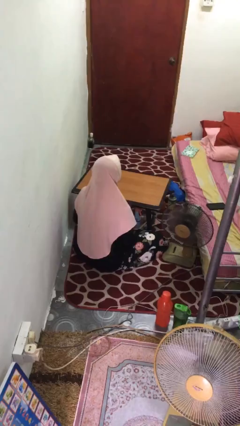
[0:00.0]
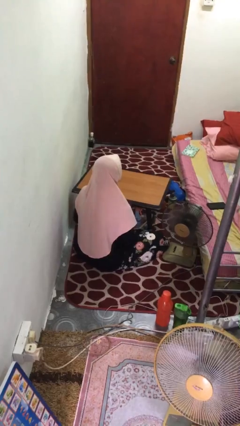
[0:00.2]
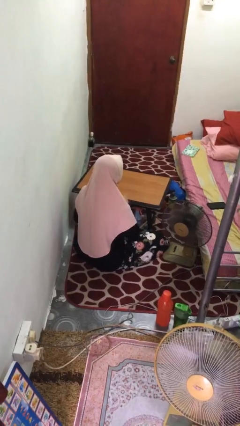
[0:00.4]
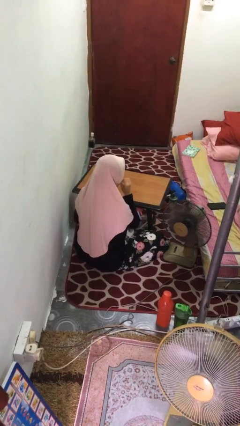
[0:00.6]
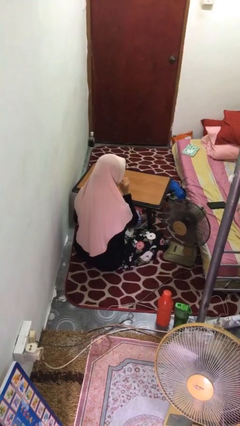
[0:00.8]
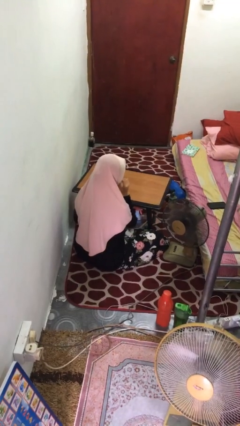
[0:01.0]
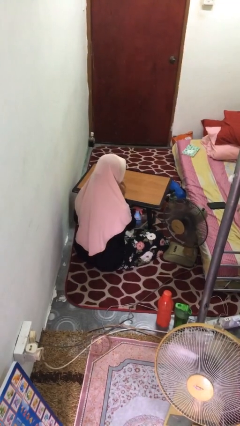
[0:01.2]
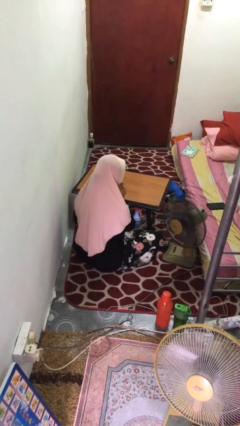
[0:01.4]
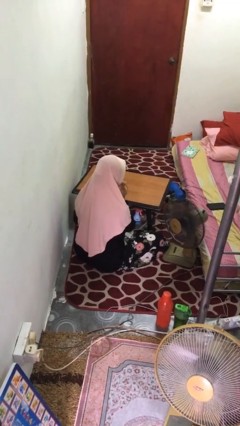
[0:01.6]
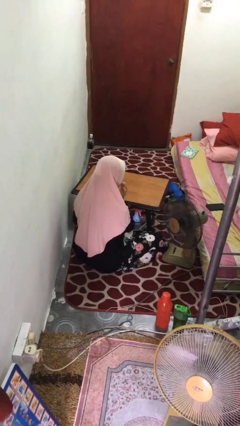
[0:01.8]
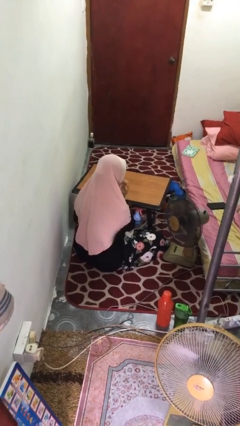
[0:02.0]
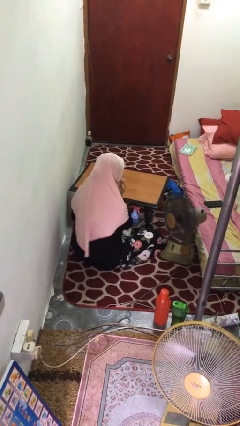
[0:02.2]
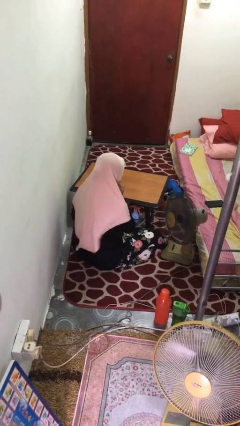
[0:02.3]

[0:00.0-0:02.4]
person licks fingers

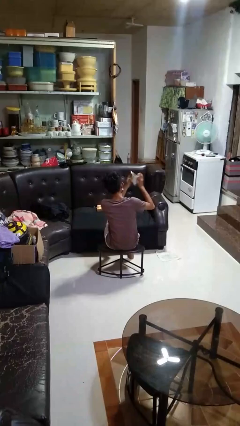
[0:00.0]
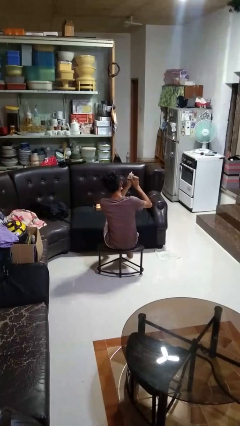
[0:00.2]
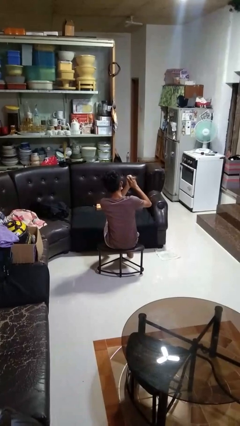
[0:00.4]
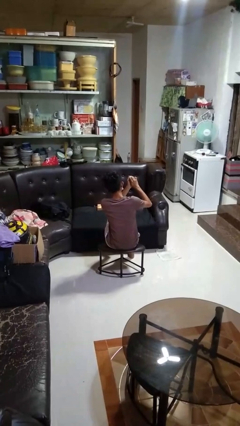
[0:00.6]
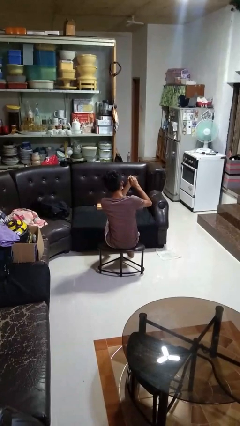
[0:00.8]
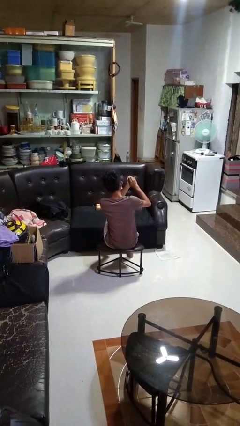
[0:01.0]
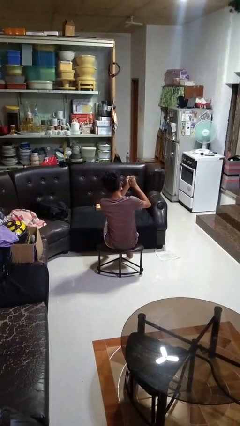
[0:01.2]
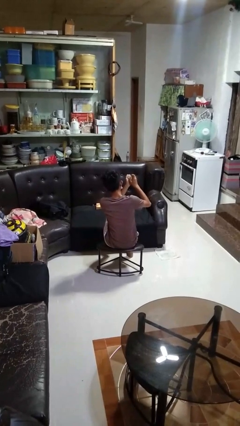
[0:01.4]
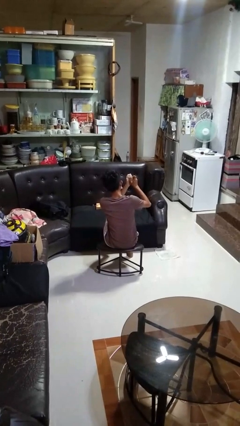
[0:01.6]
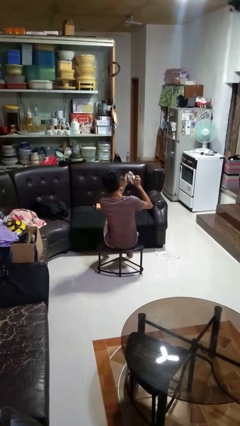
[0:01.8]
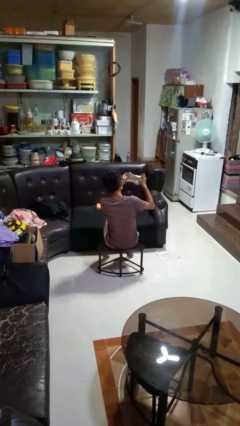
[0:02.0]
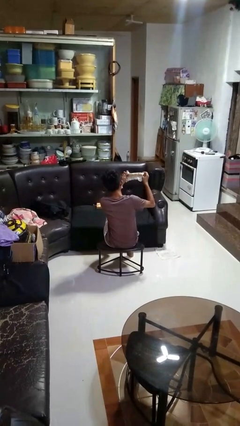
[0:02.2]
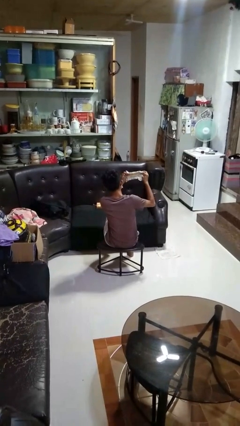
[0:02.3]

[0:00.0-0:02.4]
person crumples paper

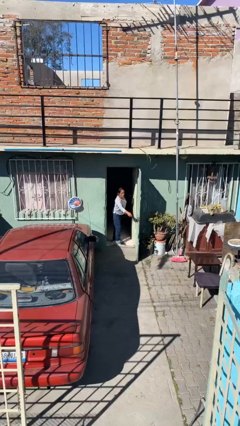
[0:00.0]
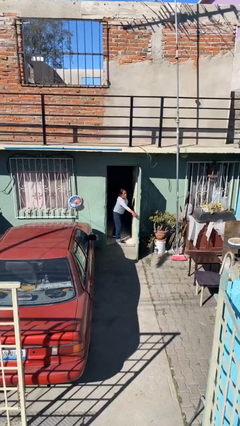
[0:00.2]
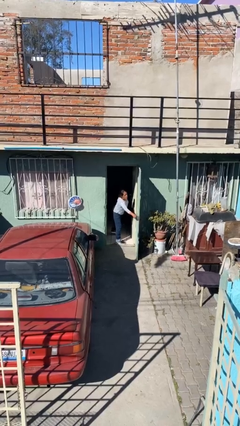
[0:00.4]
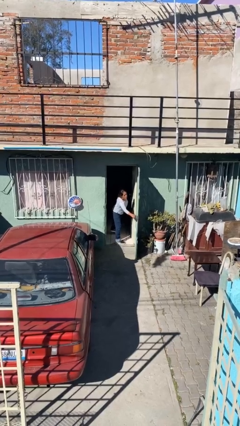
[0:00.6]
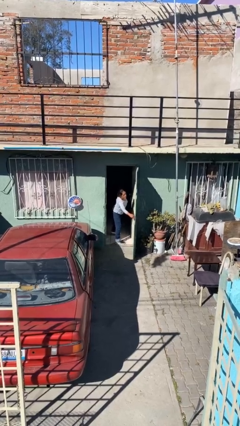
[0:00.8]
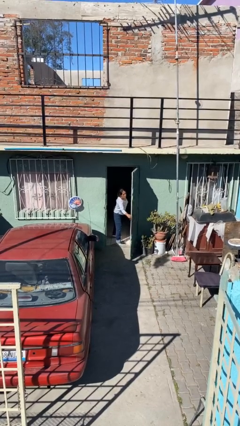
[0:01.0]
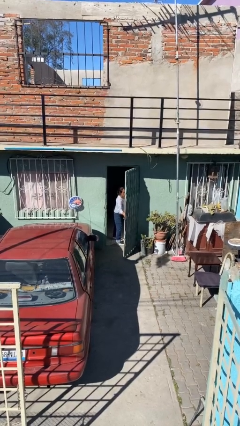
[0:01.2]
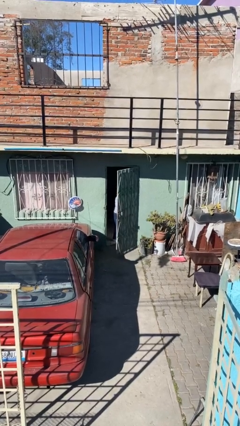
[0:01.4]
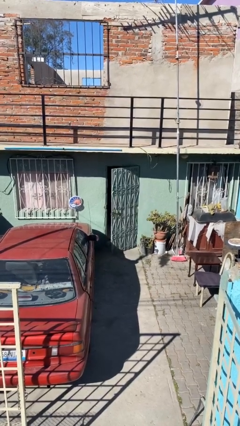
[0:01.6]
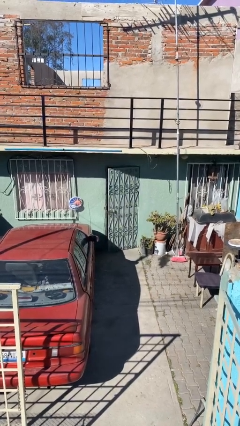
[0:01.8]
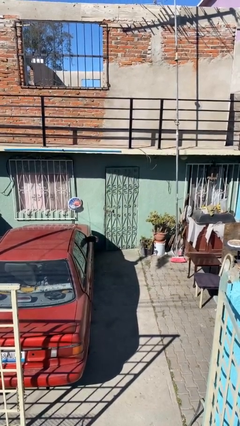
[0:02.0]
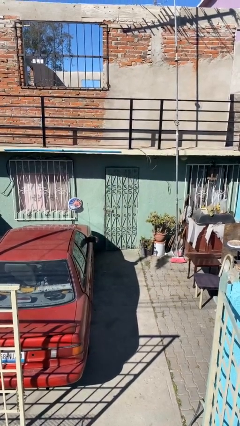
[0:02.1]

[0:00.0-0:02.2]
person closes facility door

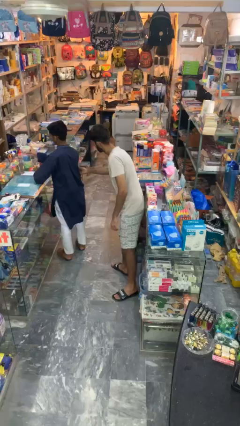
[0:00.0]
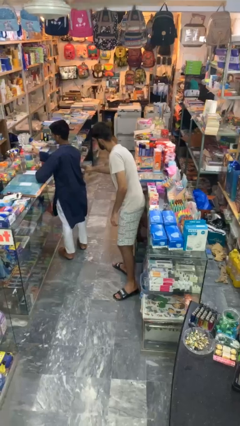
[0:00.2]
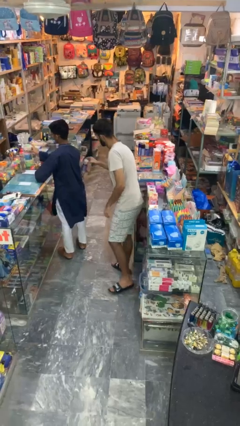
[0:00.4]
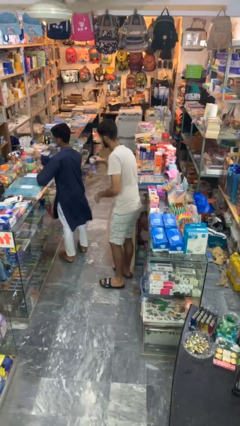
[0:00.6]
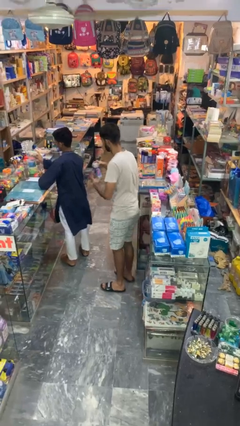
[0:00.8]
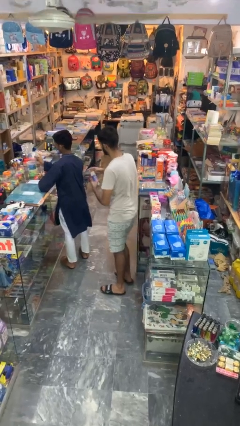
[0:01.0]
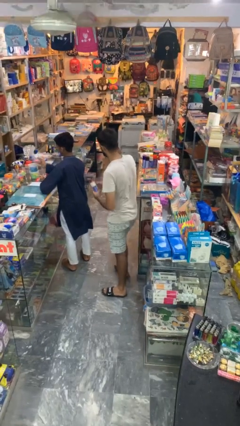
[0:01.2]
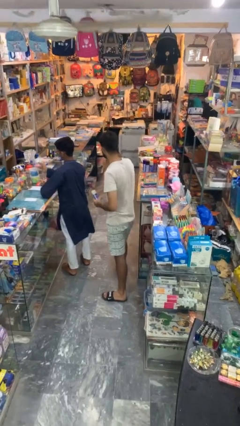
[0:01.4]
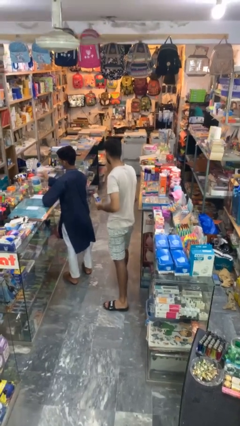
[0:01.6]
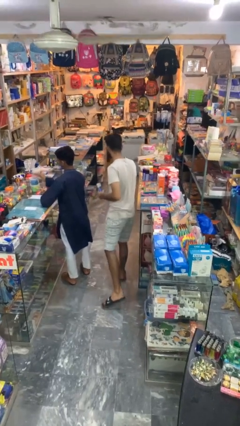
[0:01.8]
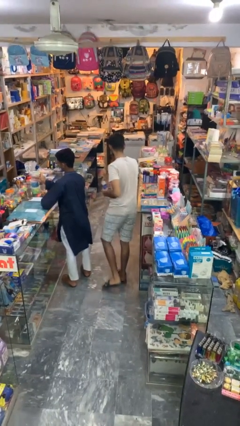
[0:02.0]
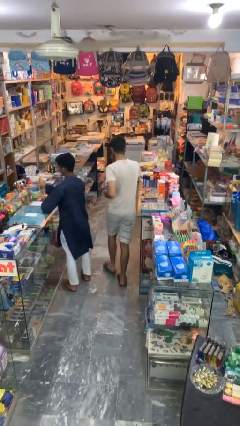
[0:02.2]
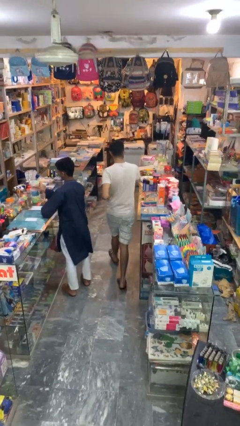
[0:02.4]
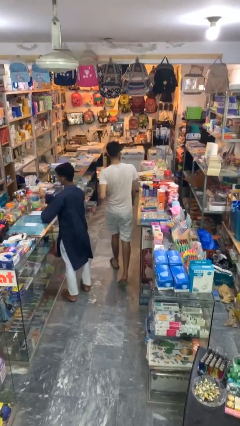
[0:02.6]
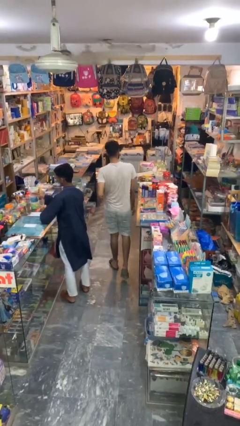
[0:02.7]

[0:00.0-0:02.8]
person steals object from person

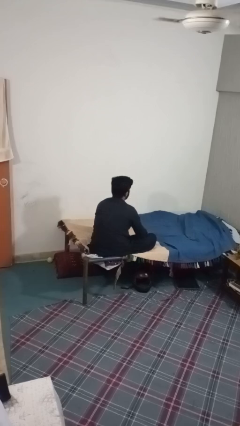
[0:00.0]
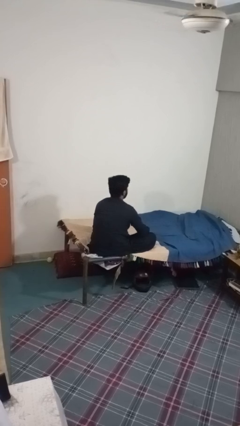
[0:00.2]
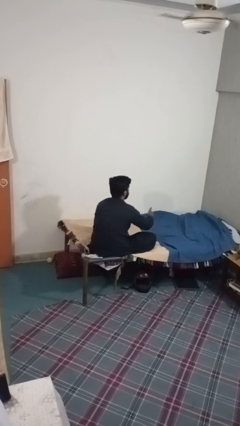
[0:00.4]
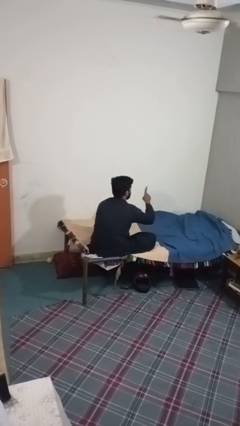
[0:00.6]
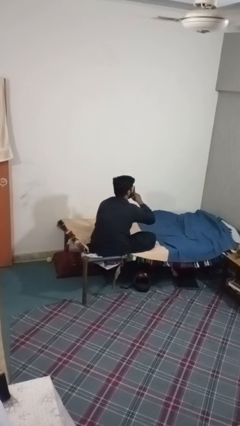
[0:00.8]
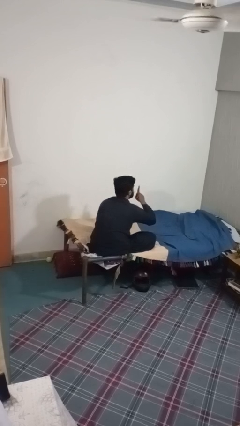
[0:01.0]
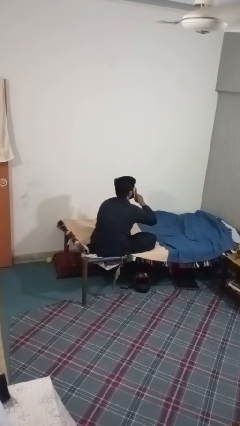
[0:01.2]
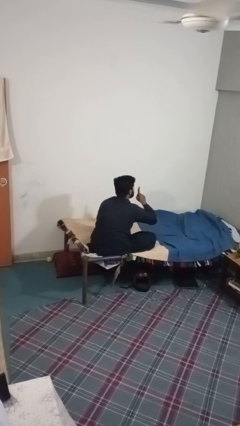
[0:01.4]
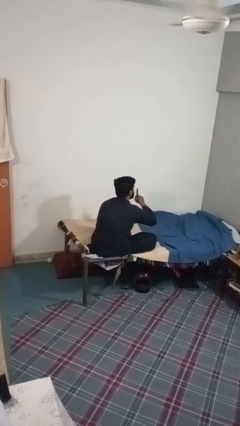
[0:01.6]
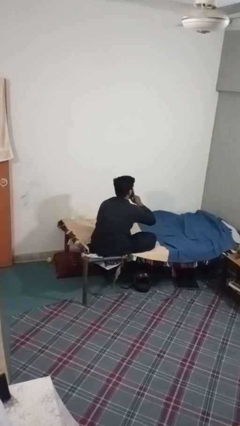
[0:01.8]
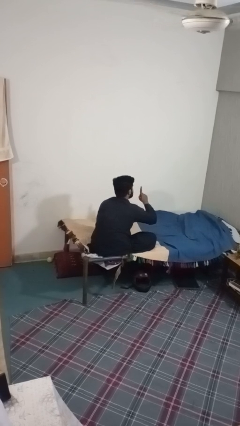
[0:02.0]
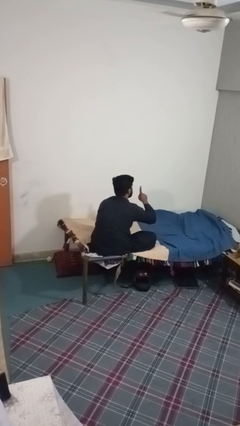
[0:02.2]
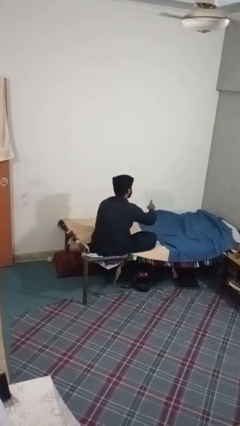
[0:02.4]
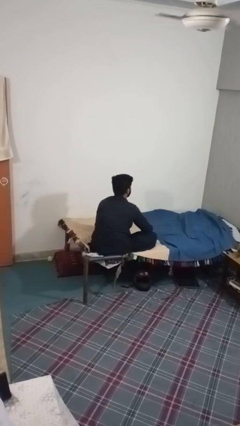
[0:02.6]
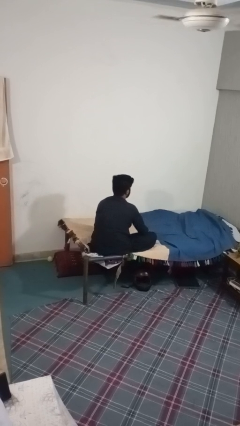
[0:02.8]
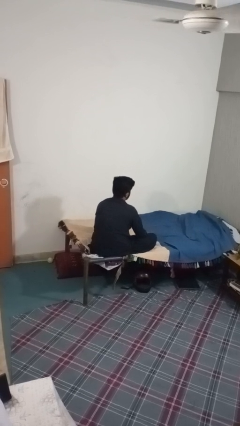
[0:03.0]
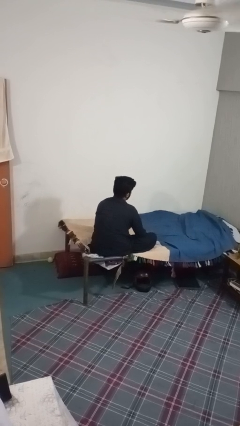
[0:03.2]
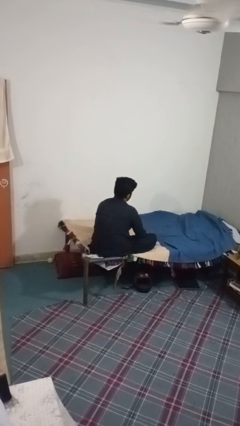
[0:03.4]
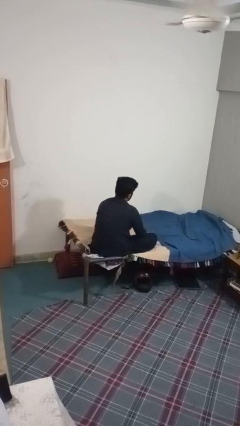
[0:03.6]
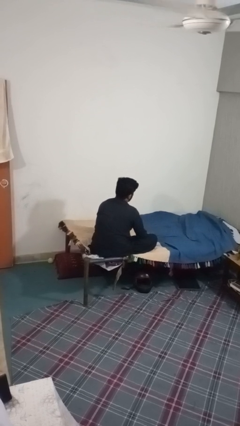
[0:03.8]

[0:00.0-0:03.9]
person gestures be quiet

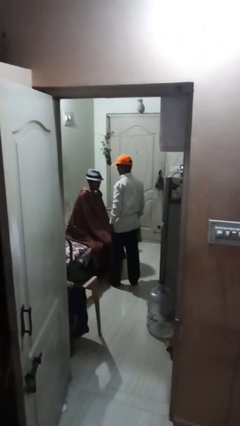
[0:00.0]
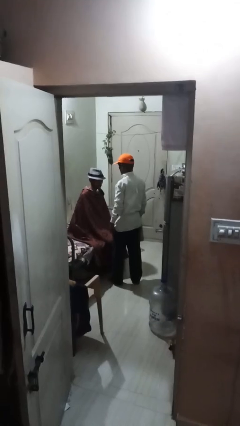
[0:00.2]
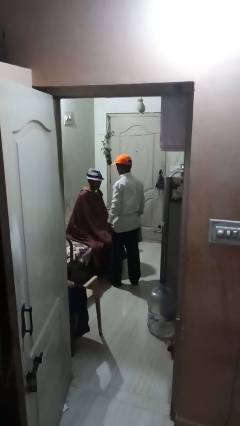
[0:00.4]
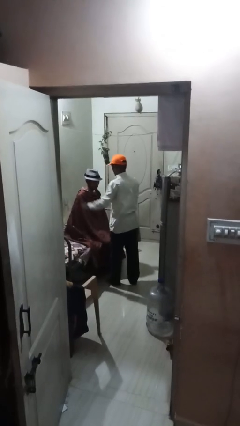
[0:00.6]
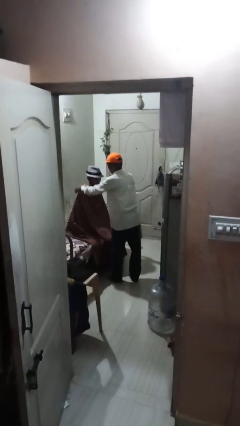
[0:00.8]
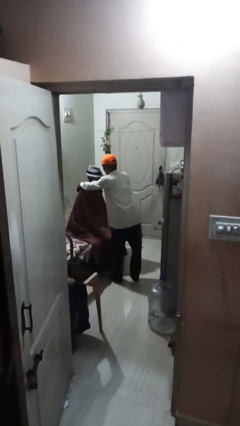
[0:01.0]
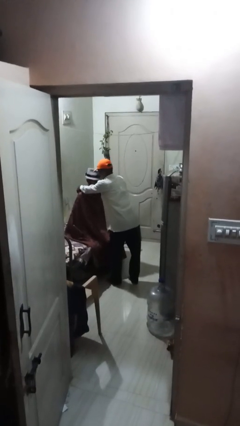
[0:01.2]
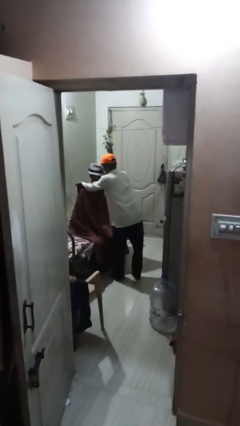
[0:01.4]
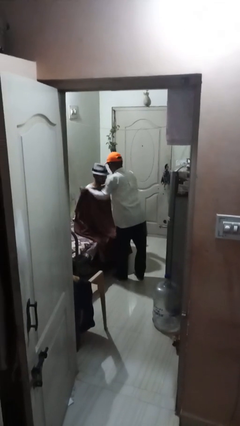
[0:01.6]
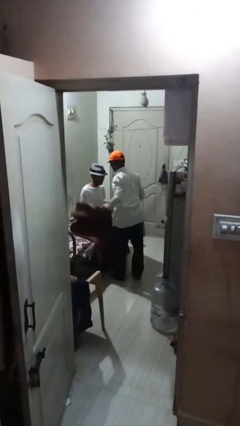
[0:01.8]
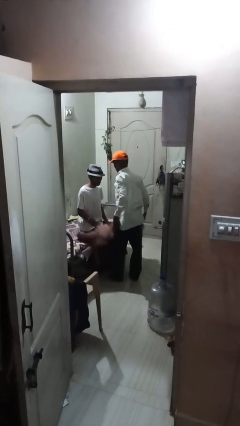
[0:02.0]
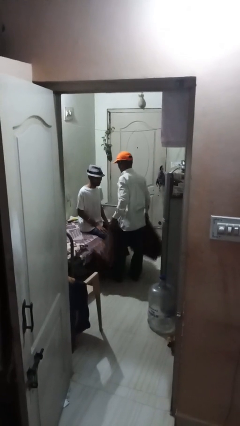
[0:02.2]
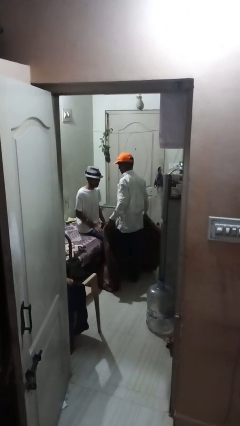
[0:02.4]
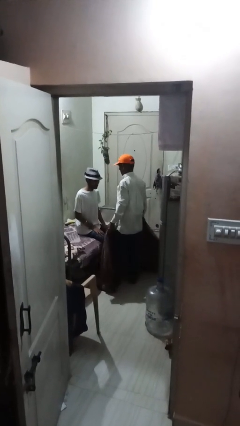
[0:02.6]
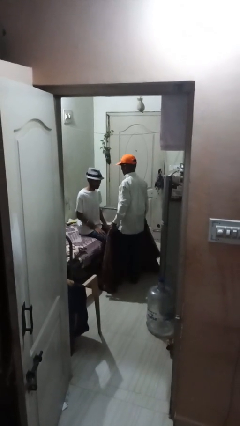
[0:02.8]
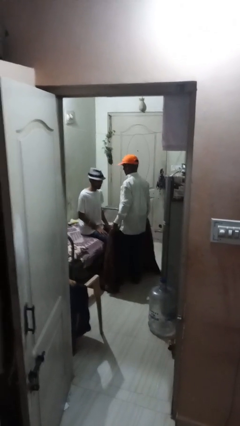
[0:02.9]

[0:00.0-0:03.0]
person covers friend with blanket

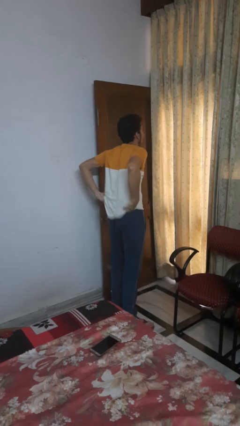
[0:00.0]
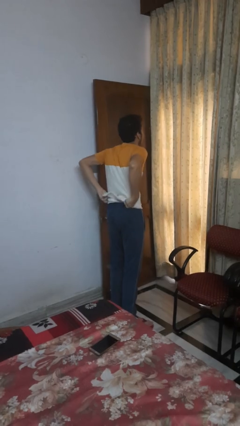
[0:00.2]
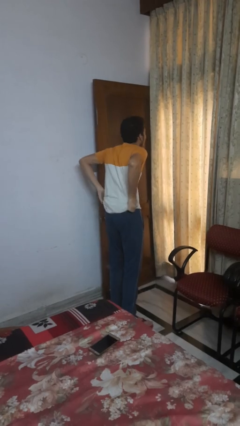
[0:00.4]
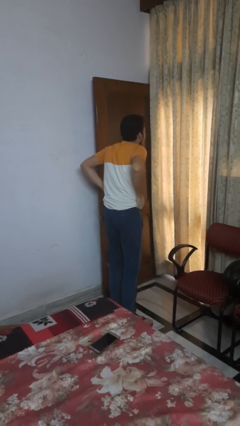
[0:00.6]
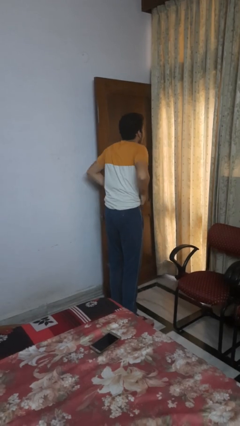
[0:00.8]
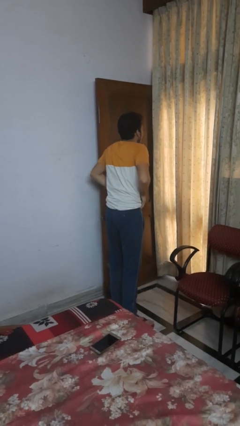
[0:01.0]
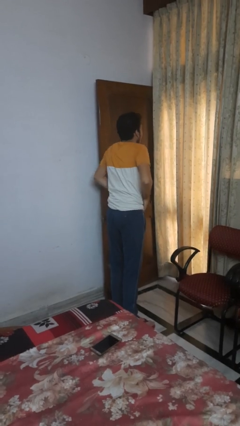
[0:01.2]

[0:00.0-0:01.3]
person tucks in shirt
